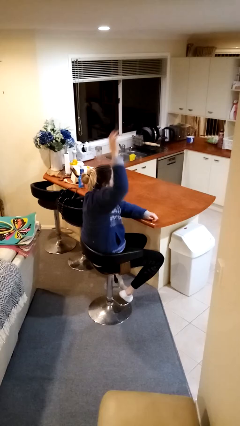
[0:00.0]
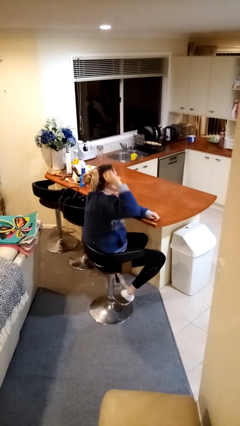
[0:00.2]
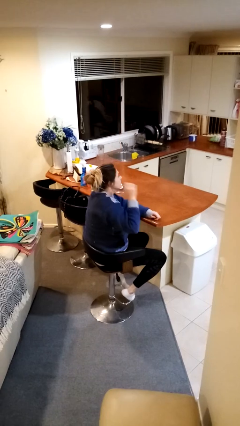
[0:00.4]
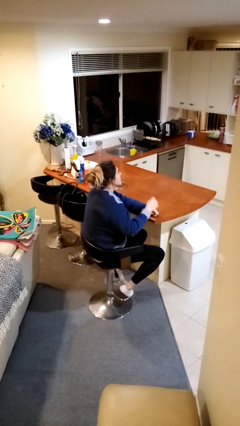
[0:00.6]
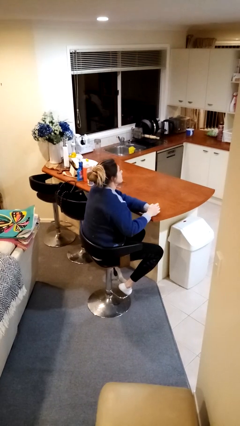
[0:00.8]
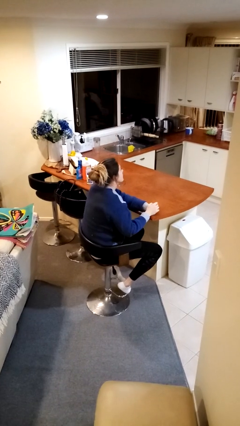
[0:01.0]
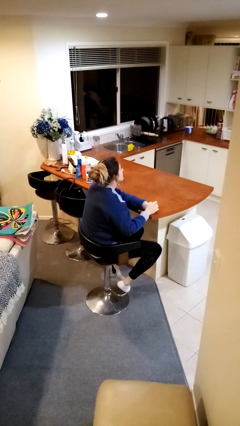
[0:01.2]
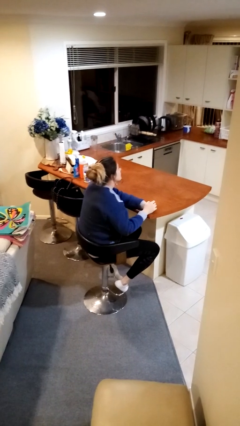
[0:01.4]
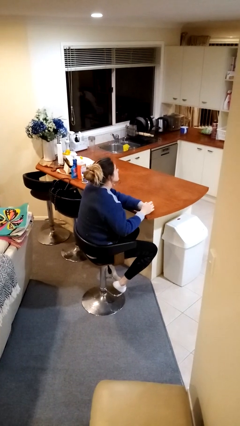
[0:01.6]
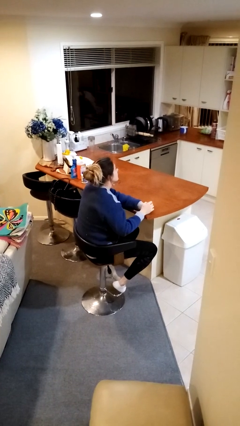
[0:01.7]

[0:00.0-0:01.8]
person gestures lower hand

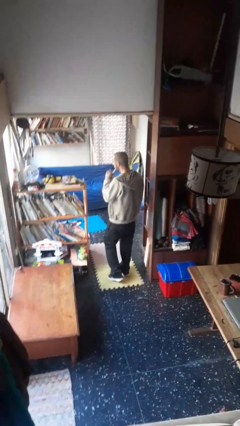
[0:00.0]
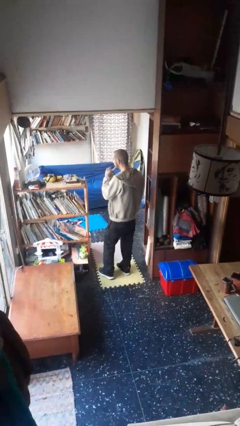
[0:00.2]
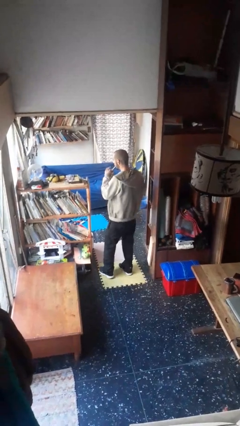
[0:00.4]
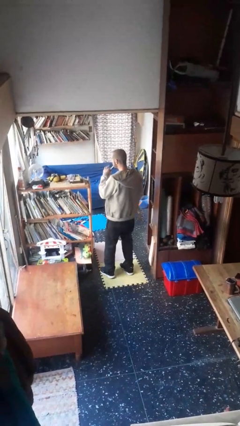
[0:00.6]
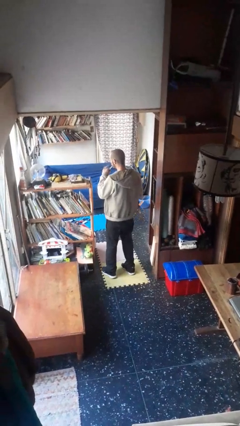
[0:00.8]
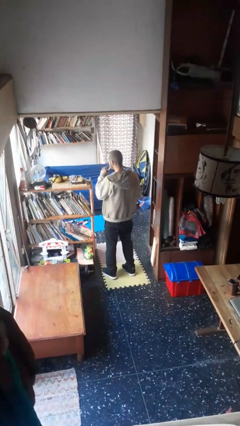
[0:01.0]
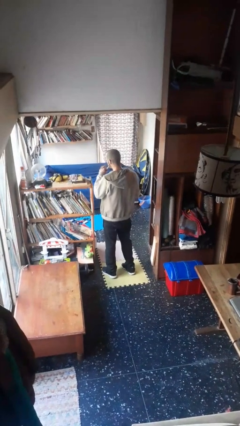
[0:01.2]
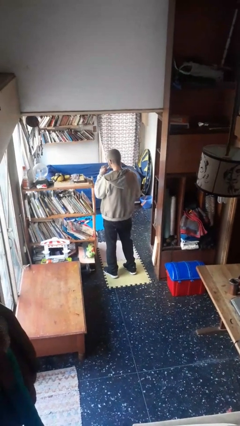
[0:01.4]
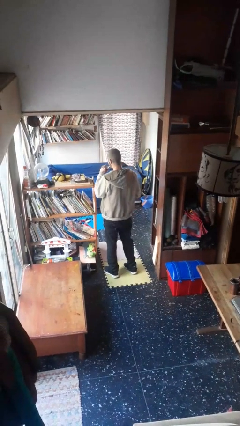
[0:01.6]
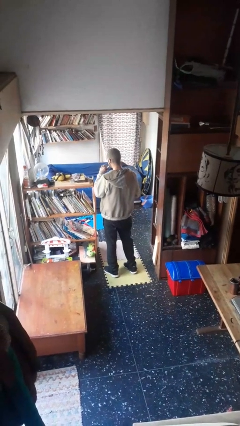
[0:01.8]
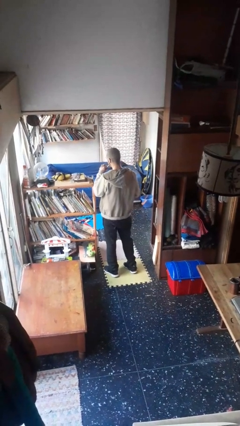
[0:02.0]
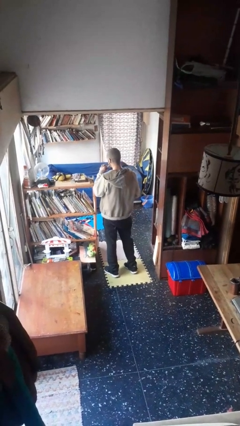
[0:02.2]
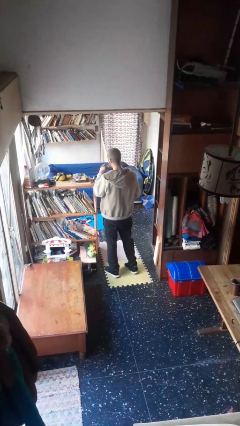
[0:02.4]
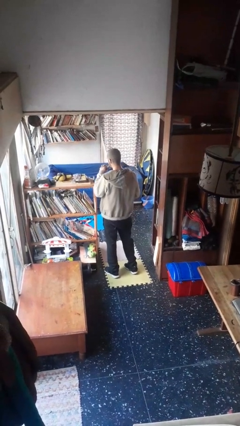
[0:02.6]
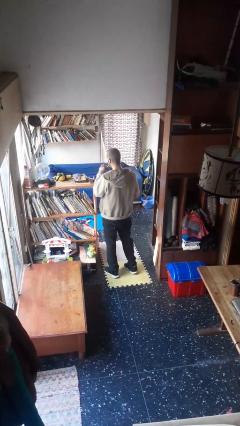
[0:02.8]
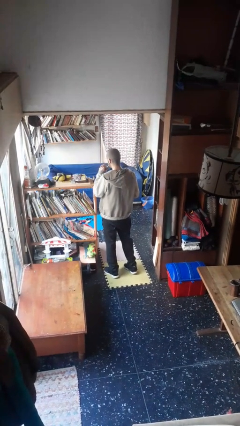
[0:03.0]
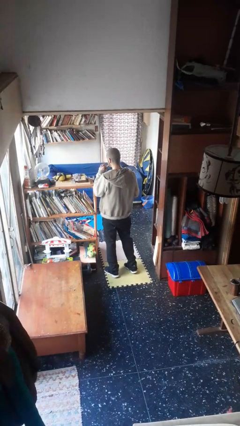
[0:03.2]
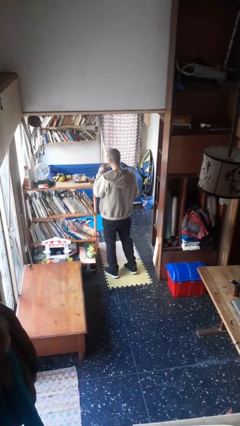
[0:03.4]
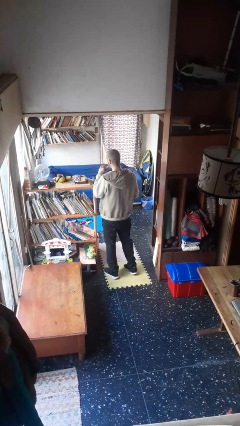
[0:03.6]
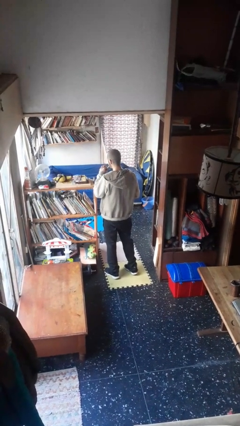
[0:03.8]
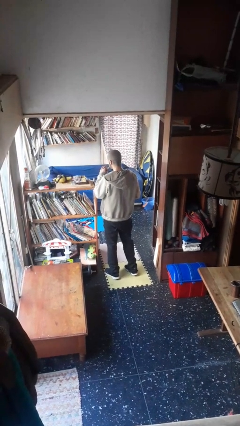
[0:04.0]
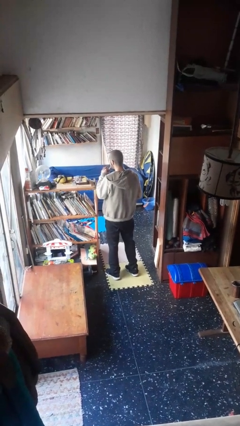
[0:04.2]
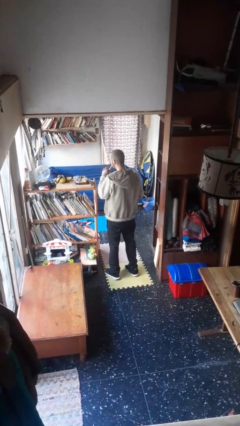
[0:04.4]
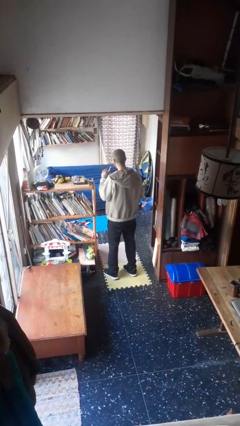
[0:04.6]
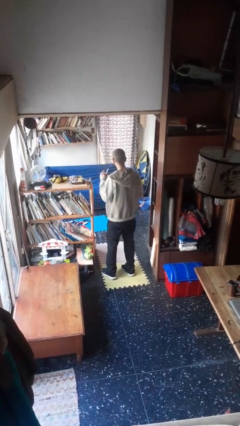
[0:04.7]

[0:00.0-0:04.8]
person drinks from straw

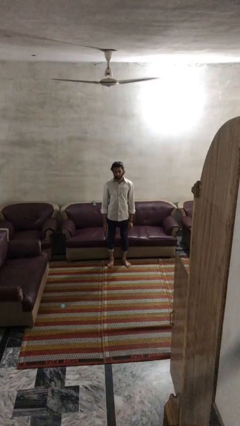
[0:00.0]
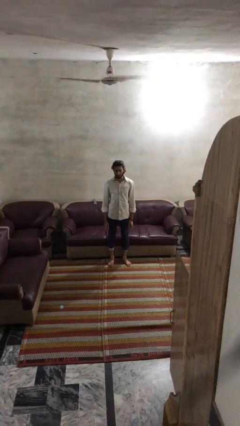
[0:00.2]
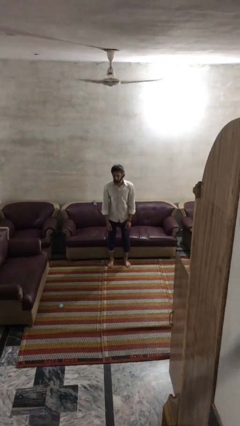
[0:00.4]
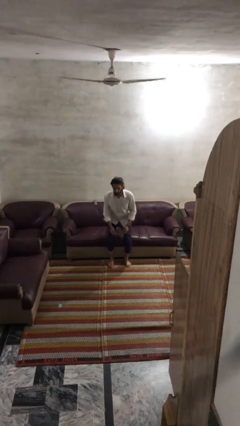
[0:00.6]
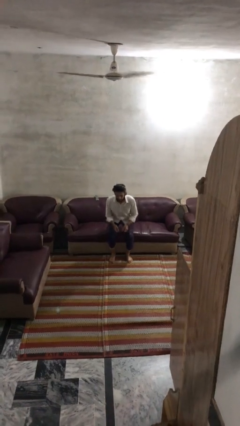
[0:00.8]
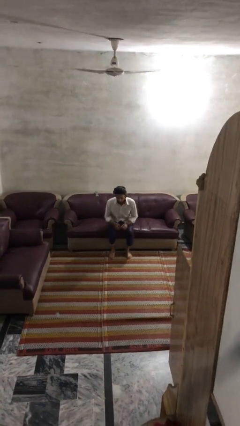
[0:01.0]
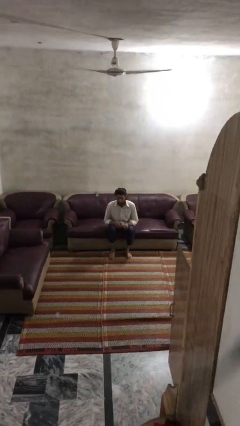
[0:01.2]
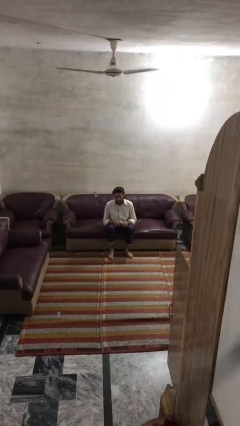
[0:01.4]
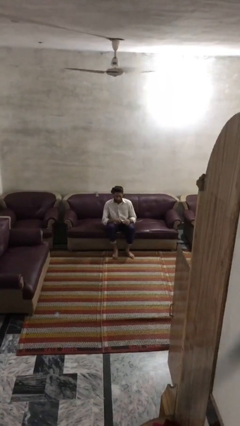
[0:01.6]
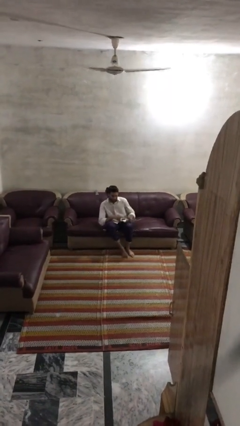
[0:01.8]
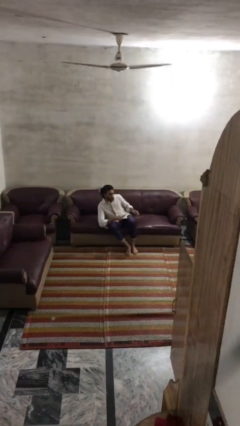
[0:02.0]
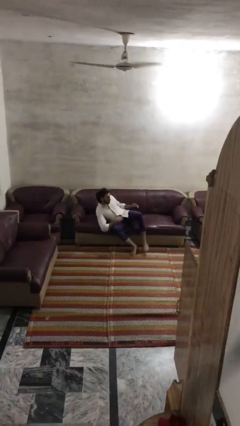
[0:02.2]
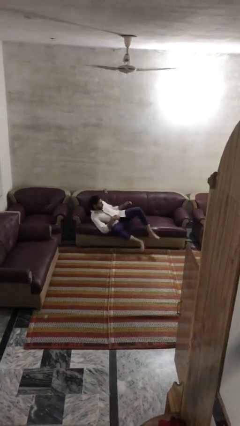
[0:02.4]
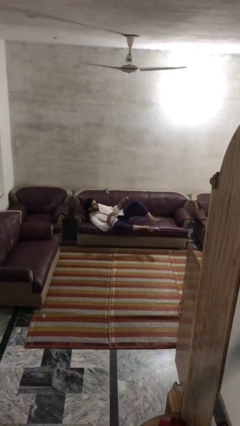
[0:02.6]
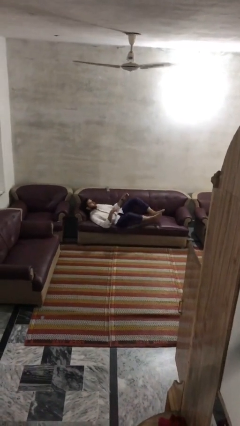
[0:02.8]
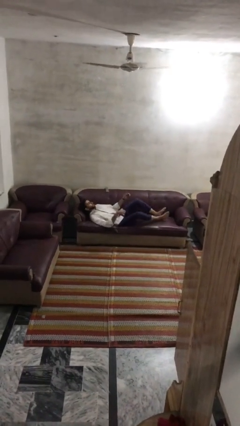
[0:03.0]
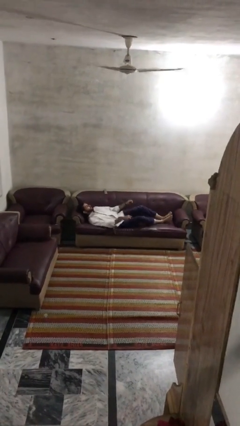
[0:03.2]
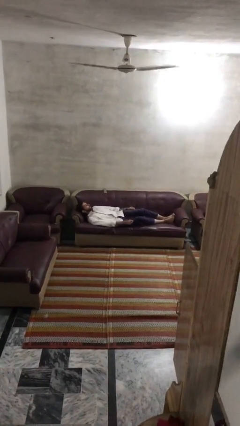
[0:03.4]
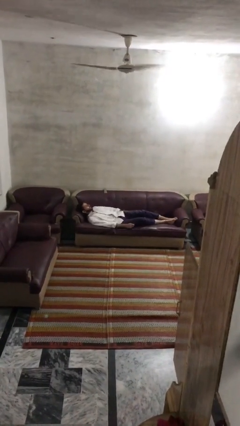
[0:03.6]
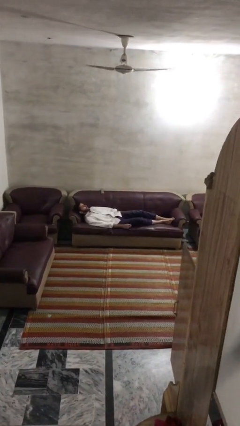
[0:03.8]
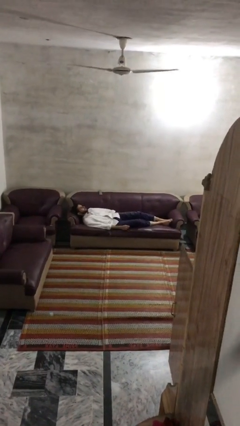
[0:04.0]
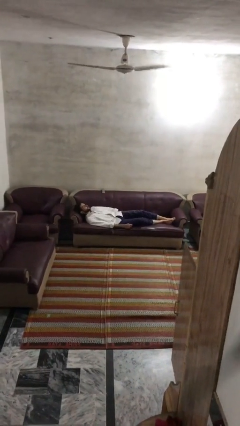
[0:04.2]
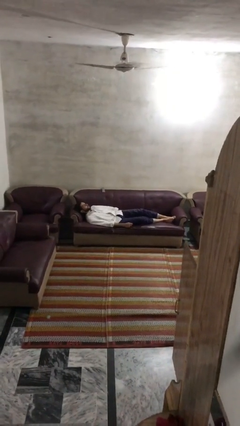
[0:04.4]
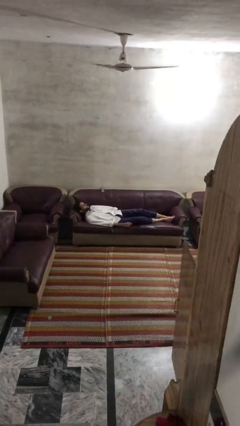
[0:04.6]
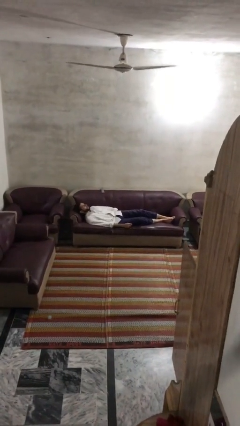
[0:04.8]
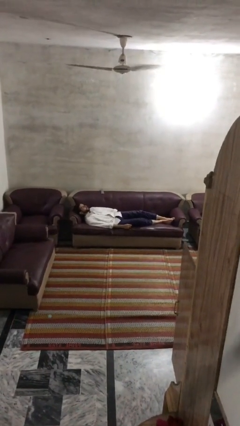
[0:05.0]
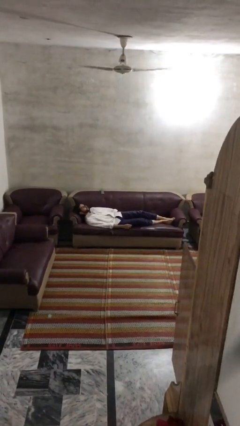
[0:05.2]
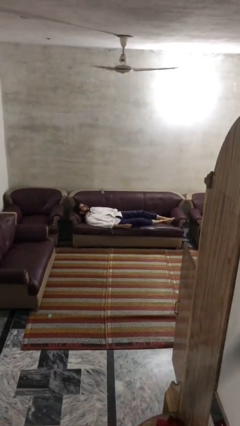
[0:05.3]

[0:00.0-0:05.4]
person lies down on couch

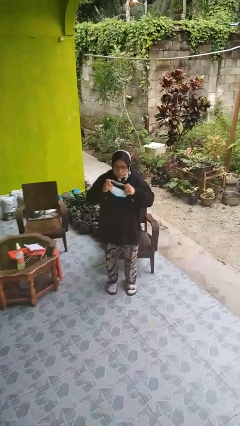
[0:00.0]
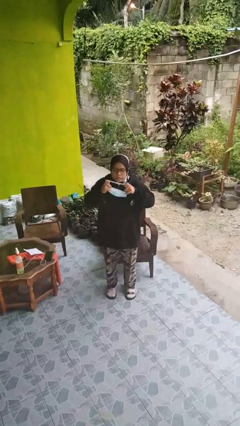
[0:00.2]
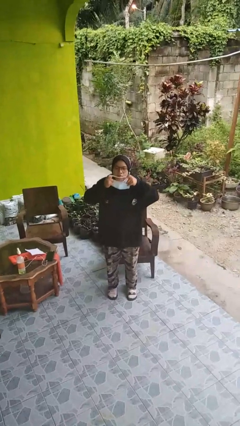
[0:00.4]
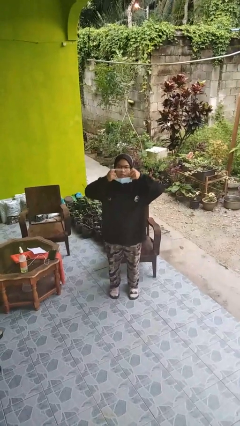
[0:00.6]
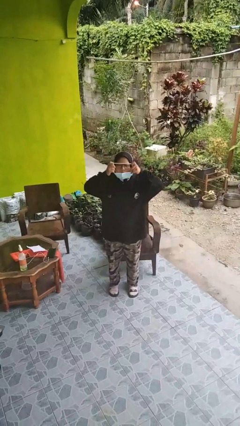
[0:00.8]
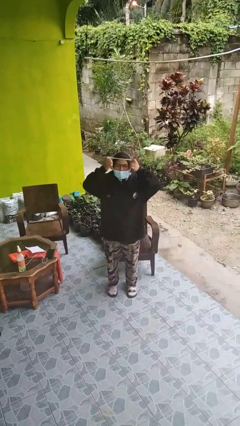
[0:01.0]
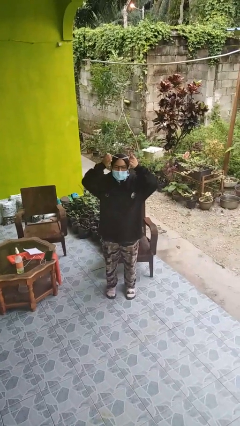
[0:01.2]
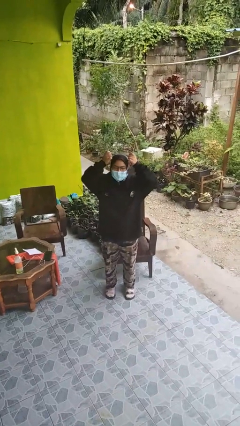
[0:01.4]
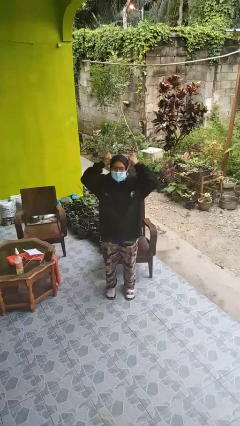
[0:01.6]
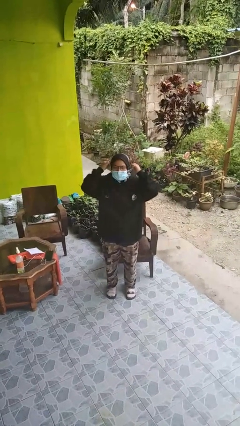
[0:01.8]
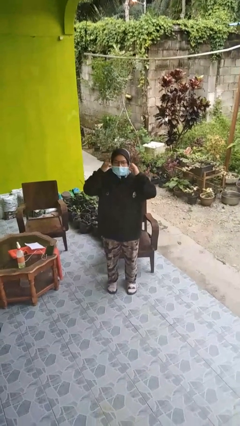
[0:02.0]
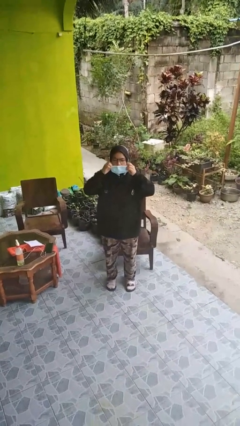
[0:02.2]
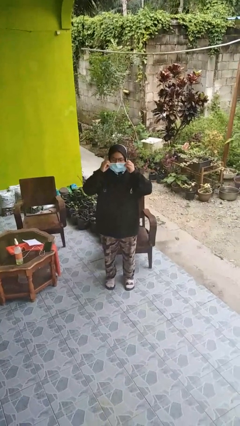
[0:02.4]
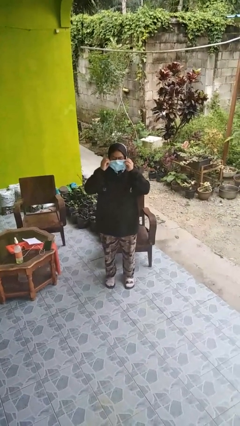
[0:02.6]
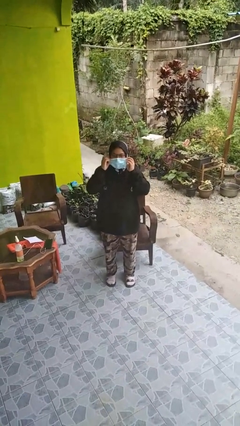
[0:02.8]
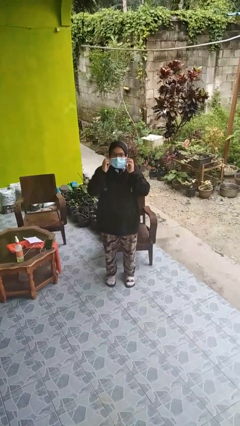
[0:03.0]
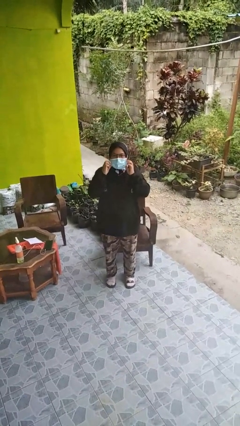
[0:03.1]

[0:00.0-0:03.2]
person puts on facemask

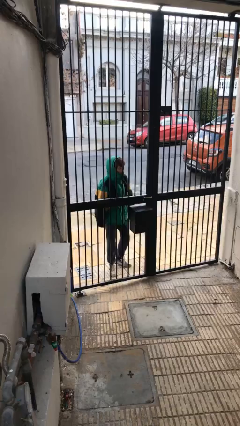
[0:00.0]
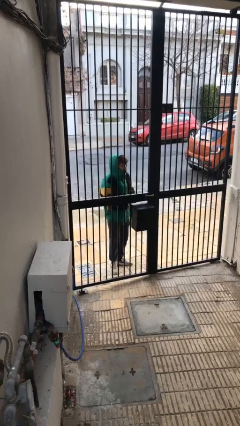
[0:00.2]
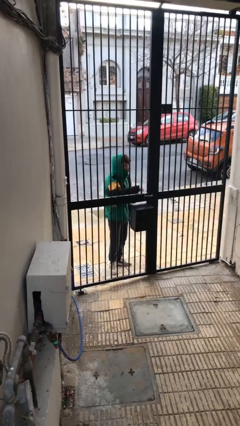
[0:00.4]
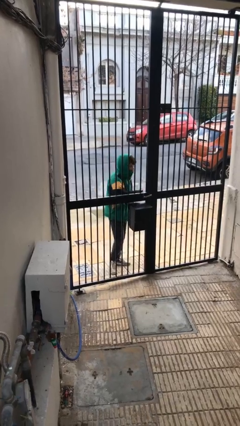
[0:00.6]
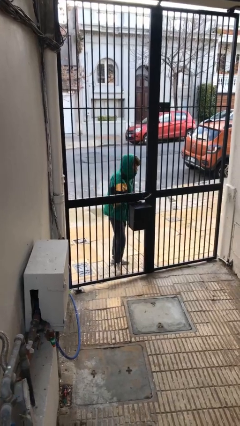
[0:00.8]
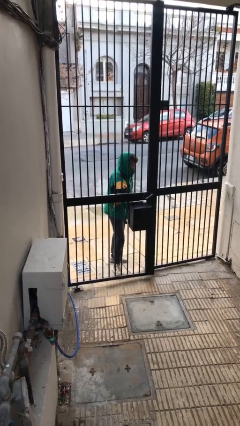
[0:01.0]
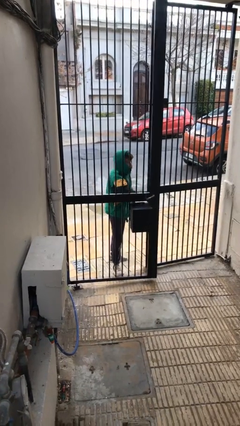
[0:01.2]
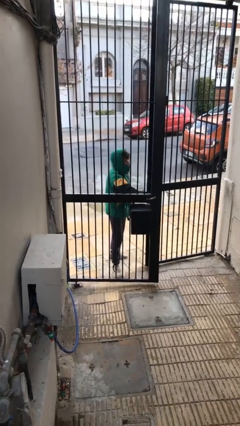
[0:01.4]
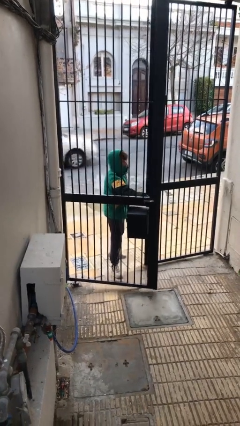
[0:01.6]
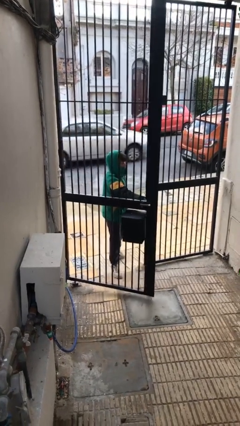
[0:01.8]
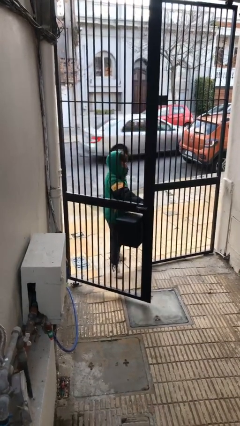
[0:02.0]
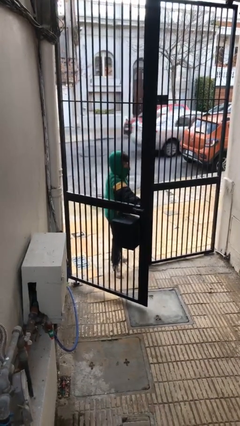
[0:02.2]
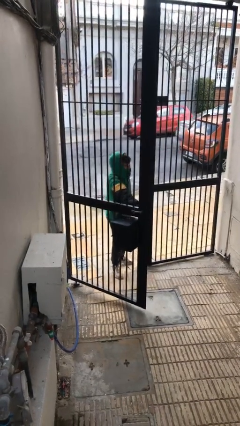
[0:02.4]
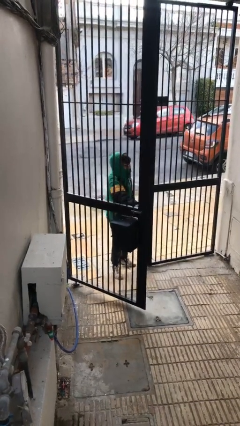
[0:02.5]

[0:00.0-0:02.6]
person opens gate
